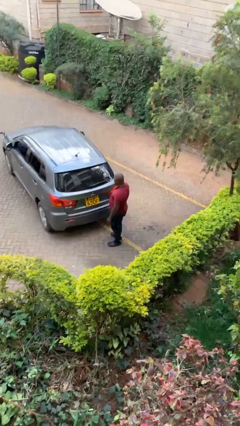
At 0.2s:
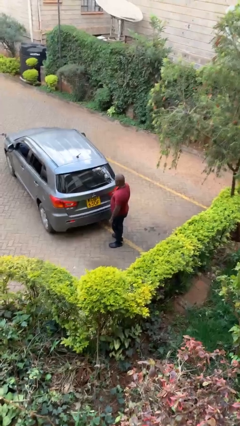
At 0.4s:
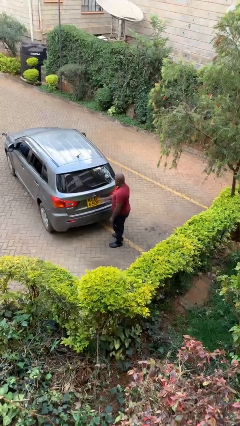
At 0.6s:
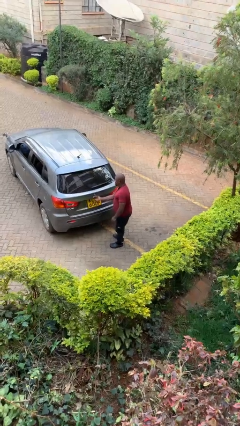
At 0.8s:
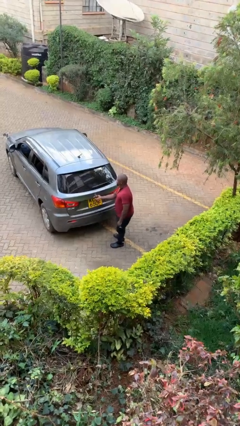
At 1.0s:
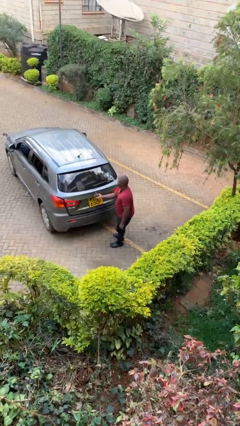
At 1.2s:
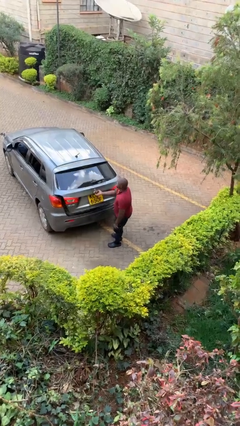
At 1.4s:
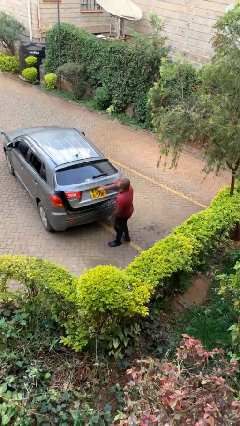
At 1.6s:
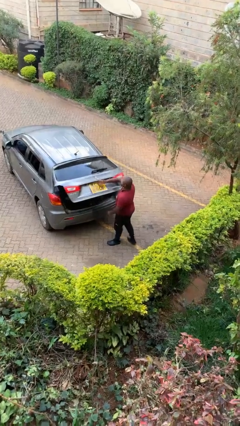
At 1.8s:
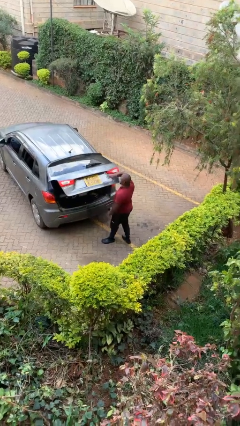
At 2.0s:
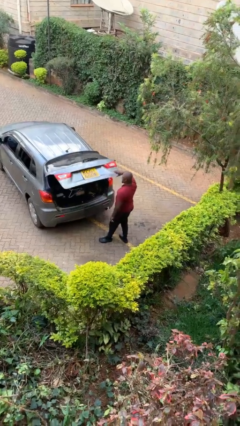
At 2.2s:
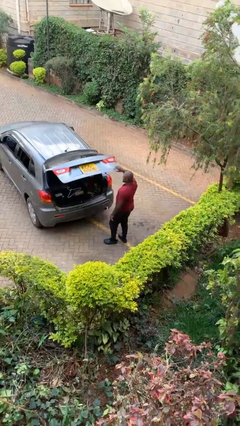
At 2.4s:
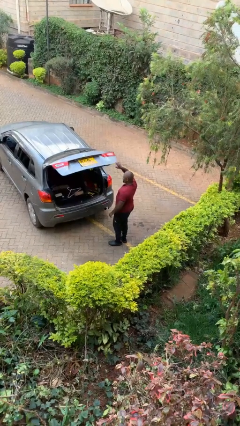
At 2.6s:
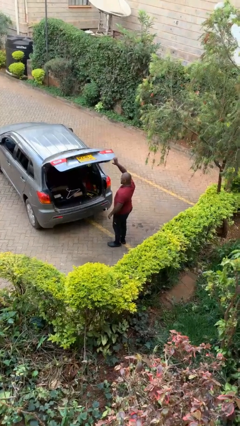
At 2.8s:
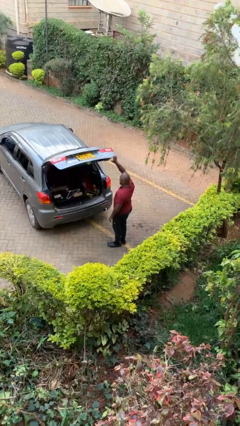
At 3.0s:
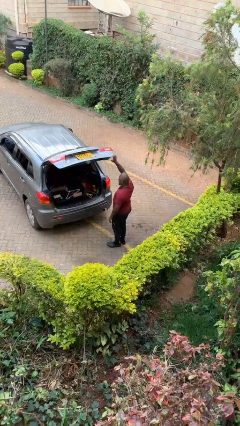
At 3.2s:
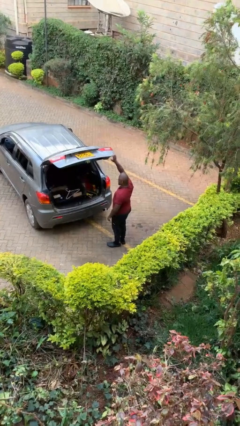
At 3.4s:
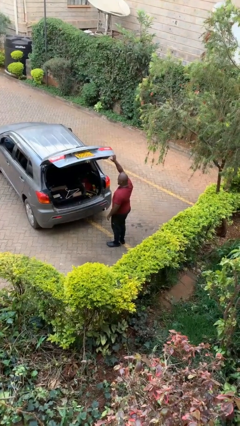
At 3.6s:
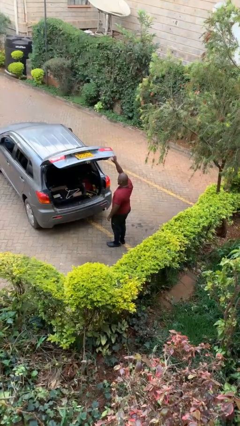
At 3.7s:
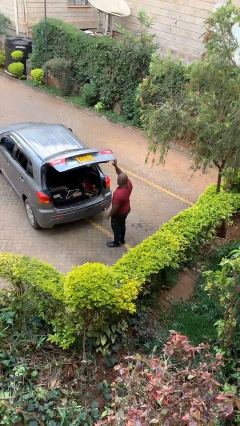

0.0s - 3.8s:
person opens car trunk

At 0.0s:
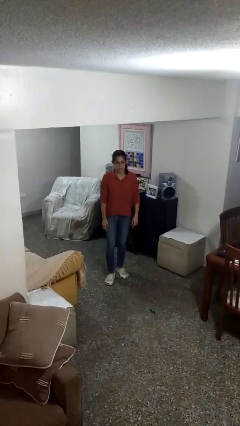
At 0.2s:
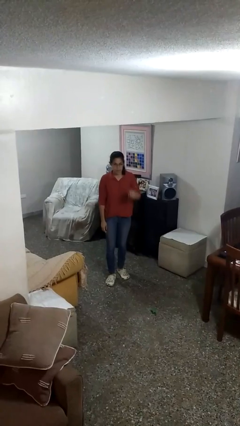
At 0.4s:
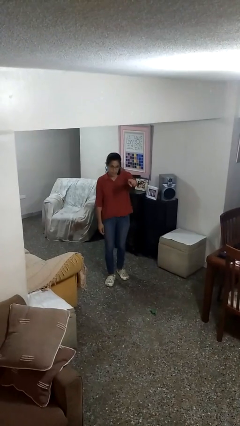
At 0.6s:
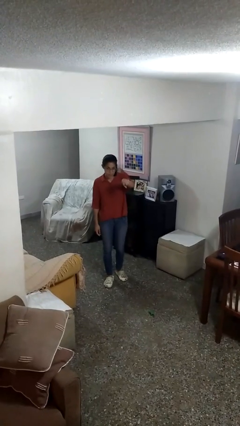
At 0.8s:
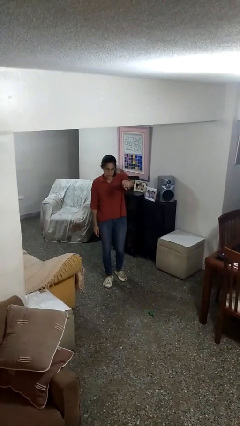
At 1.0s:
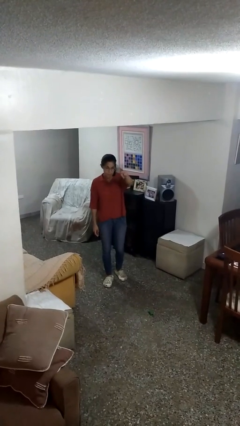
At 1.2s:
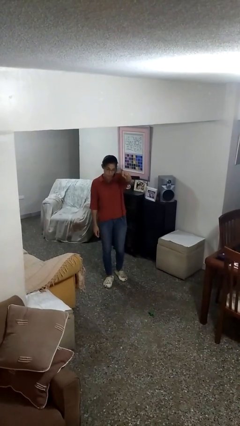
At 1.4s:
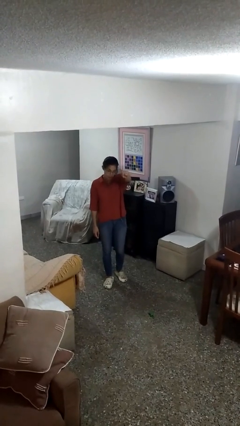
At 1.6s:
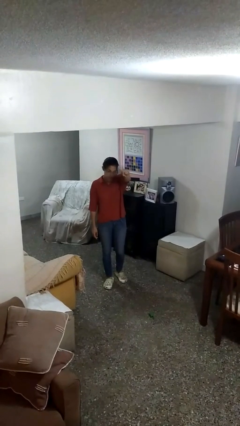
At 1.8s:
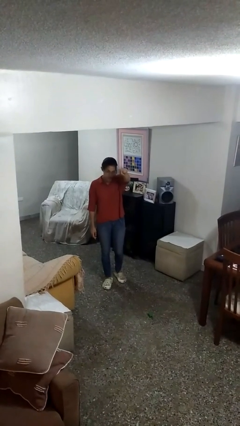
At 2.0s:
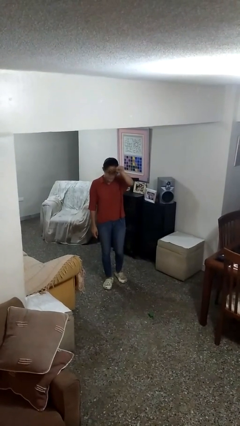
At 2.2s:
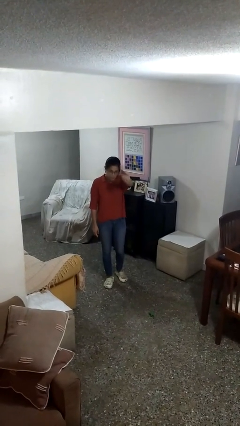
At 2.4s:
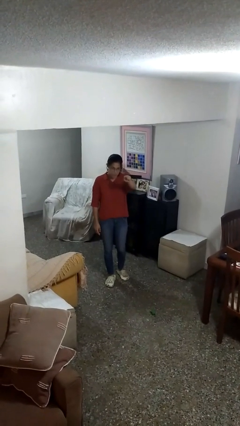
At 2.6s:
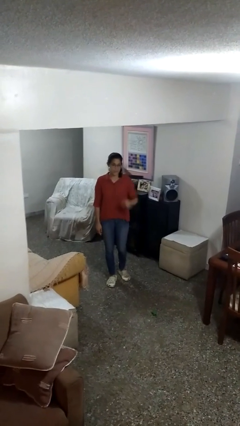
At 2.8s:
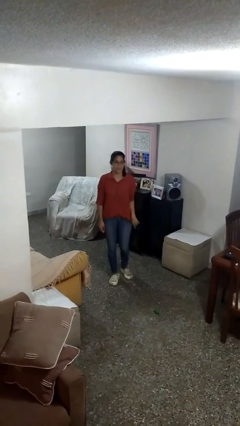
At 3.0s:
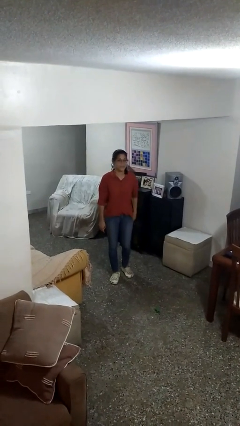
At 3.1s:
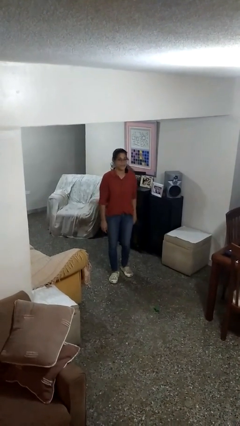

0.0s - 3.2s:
person points at person

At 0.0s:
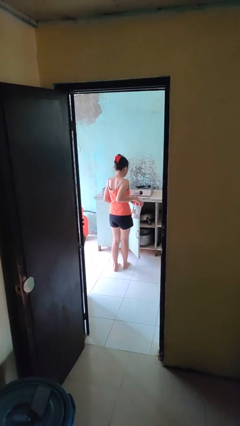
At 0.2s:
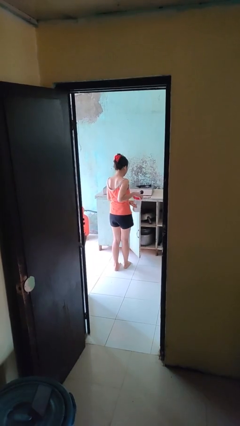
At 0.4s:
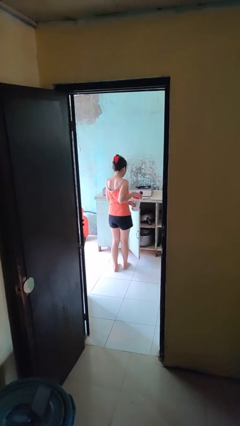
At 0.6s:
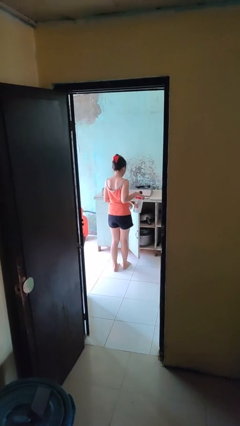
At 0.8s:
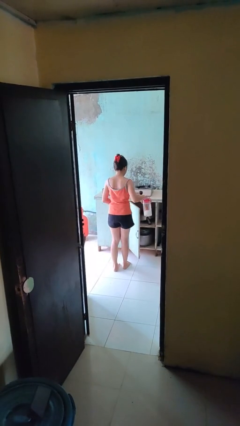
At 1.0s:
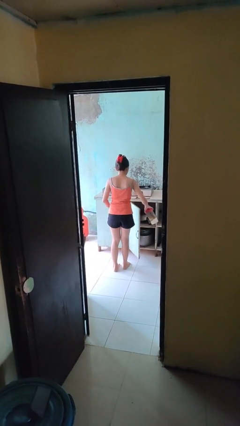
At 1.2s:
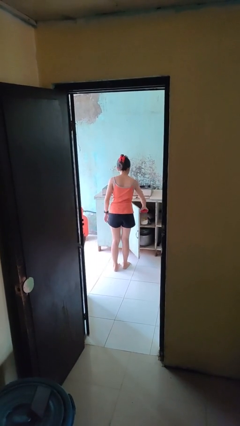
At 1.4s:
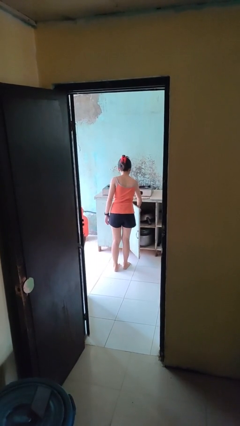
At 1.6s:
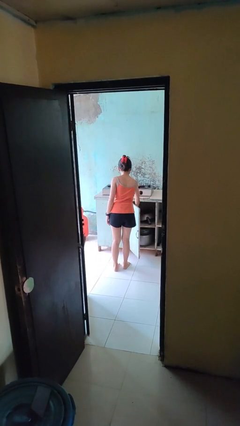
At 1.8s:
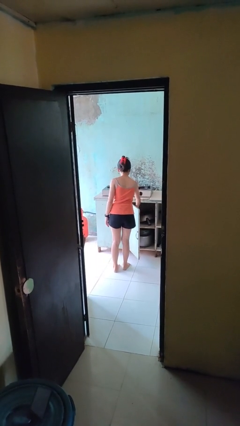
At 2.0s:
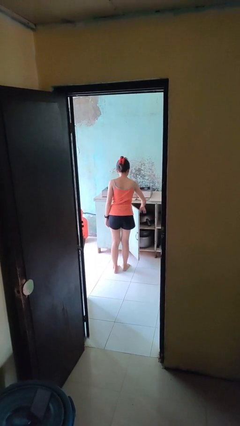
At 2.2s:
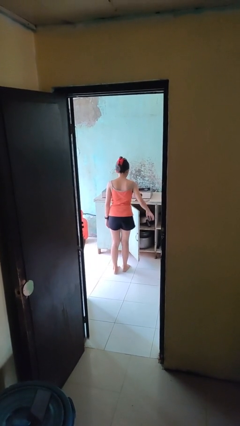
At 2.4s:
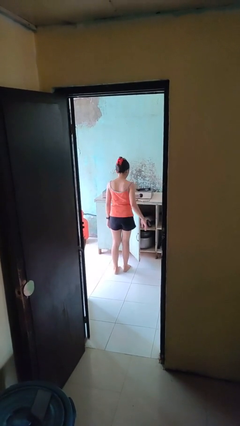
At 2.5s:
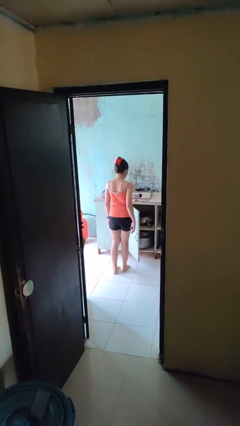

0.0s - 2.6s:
person puts down object into cabinet

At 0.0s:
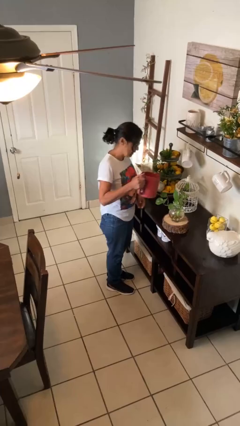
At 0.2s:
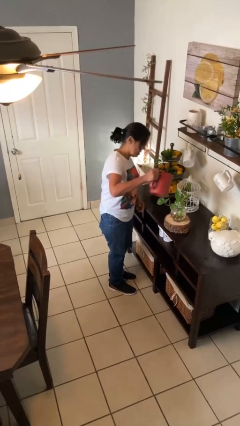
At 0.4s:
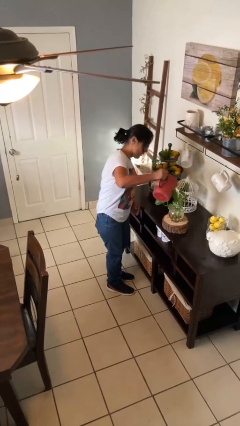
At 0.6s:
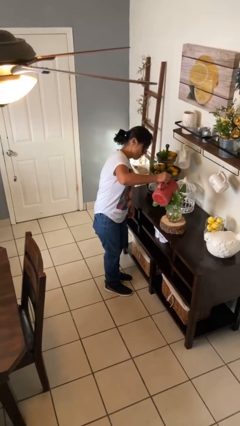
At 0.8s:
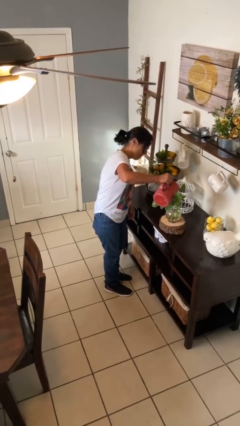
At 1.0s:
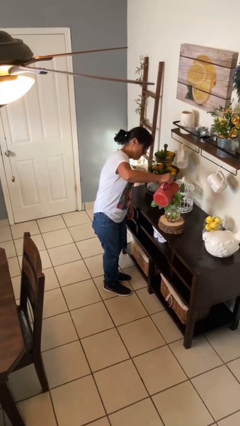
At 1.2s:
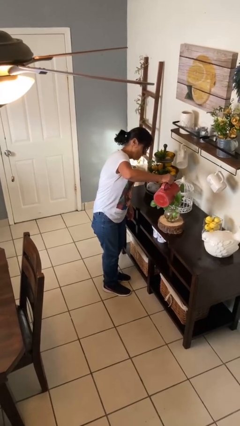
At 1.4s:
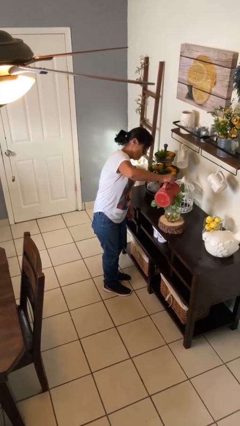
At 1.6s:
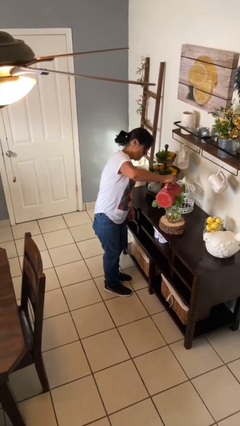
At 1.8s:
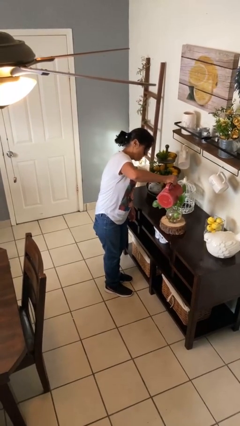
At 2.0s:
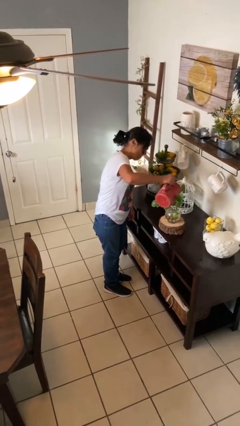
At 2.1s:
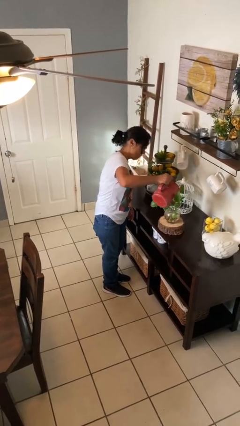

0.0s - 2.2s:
person waters houseplant

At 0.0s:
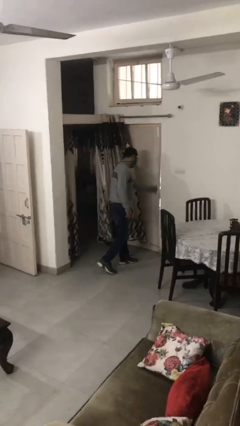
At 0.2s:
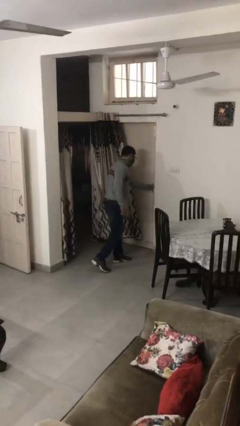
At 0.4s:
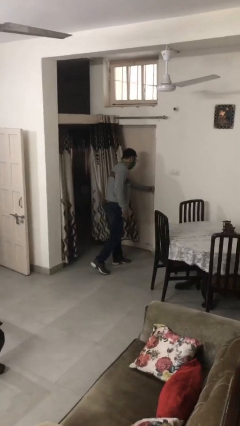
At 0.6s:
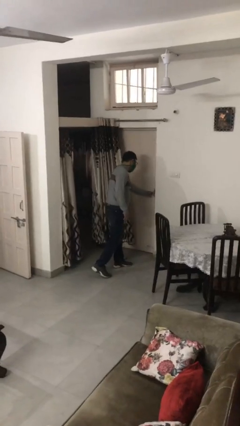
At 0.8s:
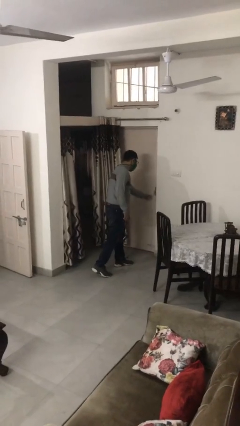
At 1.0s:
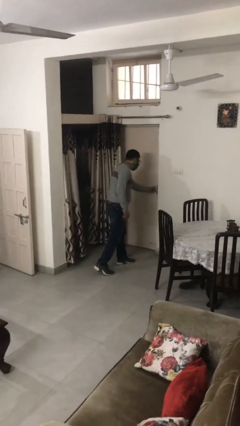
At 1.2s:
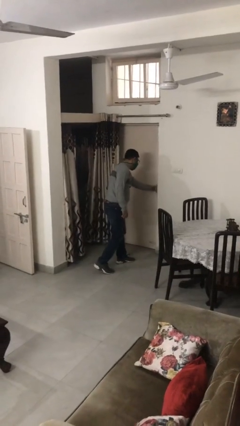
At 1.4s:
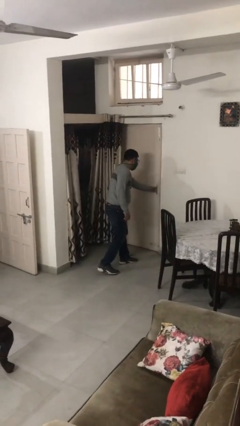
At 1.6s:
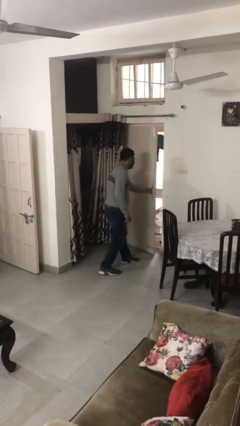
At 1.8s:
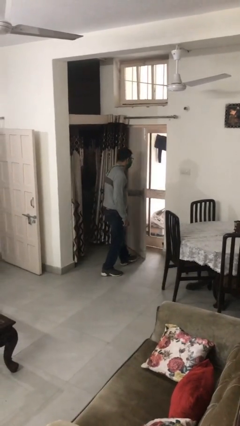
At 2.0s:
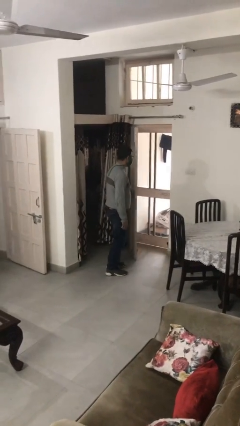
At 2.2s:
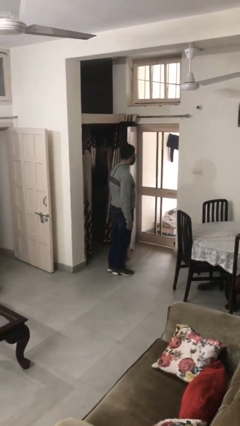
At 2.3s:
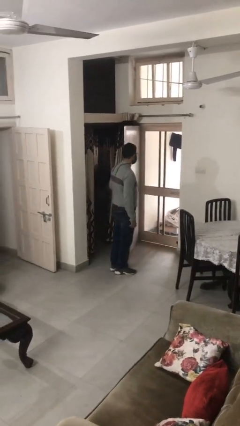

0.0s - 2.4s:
person opens facility door

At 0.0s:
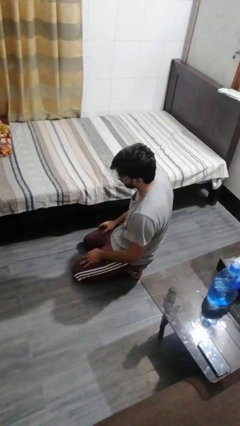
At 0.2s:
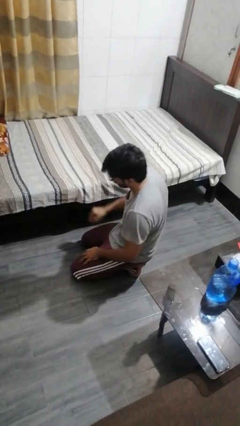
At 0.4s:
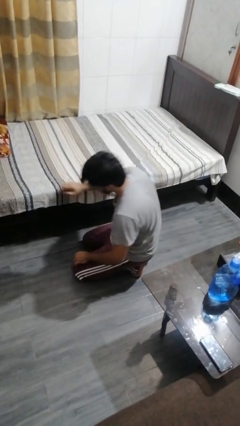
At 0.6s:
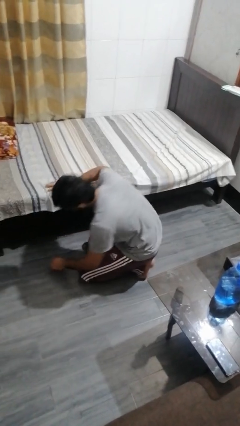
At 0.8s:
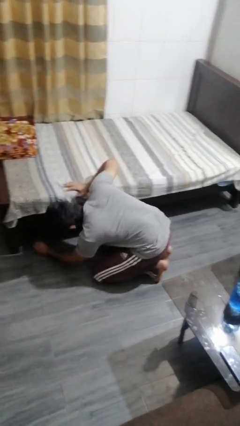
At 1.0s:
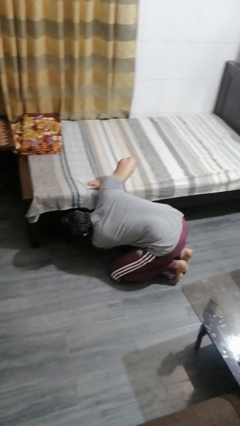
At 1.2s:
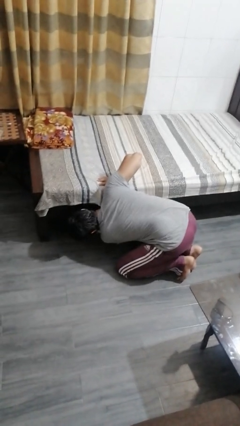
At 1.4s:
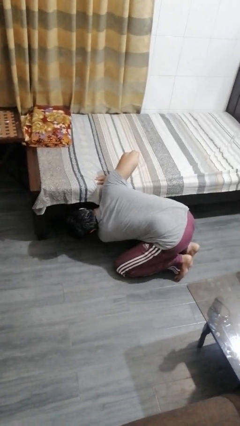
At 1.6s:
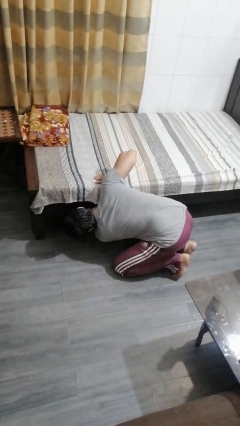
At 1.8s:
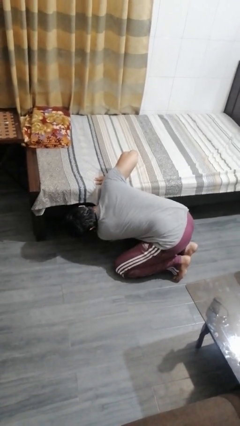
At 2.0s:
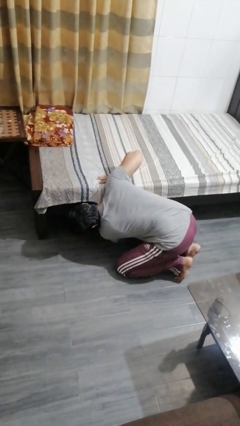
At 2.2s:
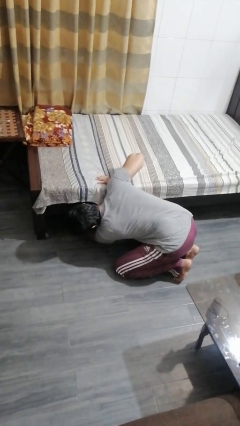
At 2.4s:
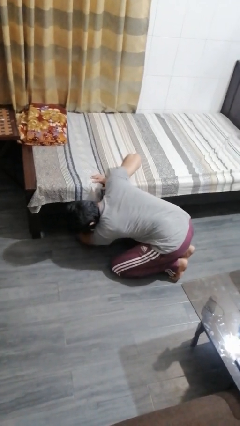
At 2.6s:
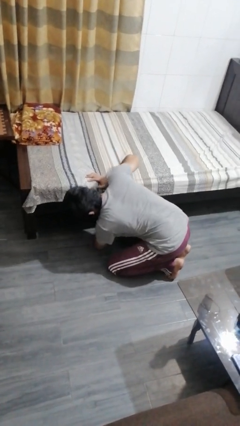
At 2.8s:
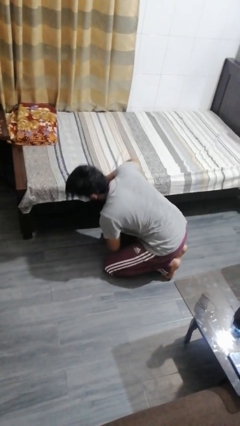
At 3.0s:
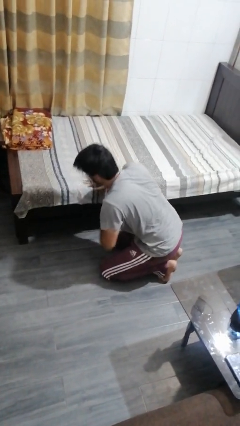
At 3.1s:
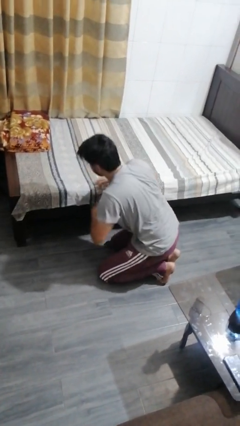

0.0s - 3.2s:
person searches under bed

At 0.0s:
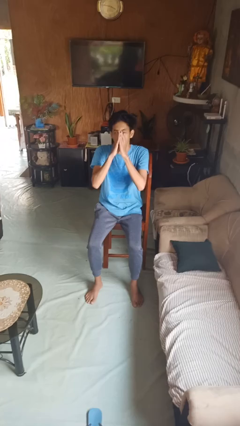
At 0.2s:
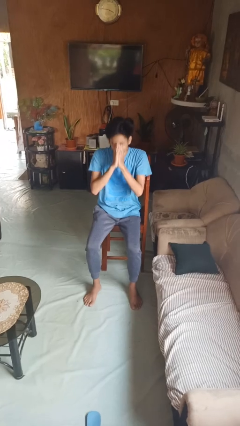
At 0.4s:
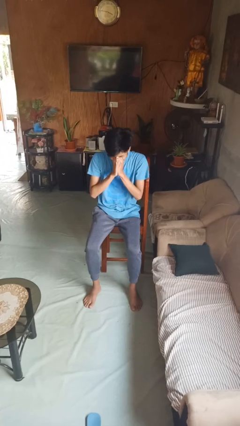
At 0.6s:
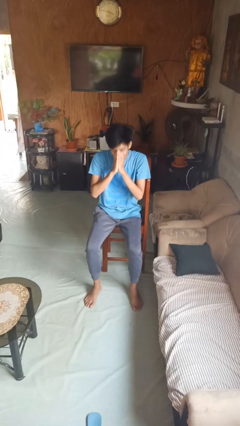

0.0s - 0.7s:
person sneezes into hand
